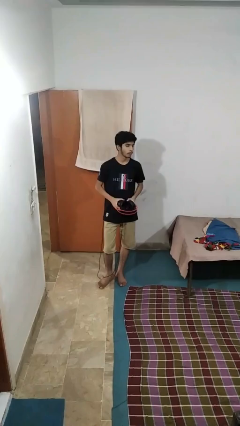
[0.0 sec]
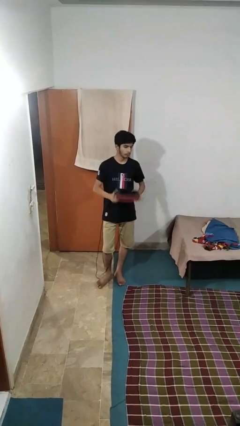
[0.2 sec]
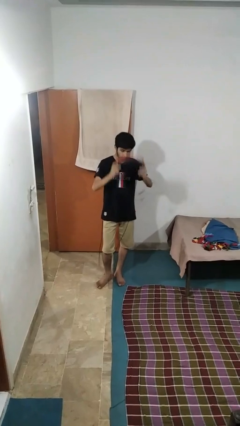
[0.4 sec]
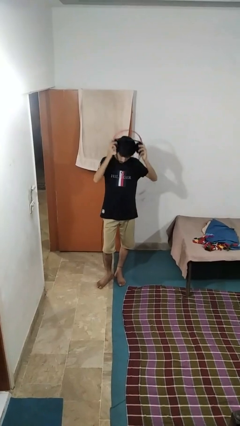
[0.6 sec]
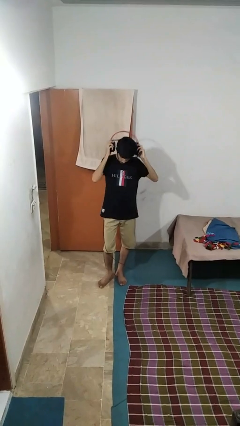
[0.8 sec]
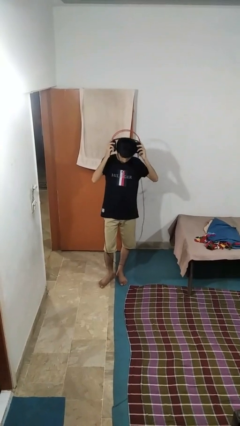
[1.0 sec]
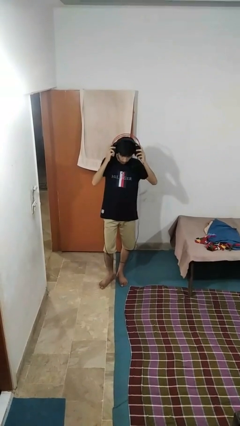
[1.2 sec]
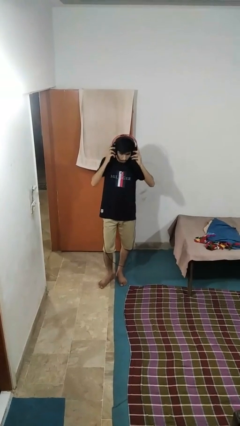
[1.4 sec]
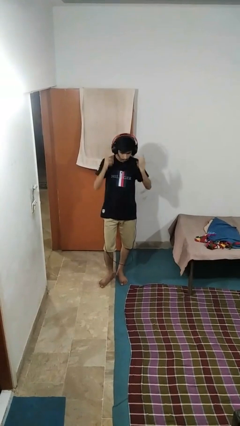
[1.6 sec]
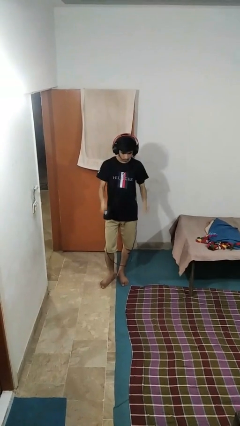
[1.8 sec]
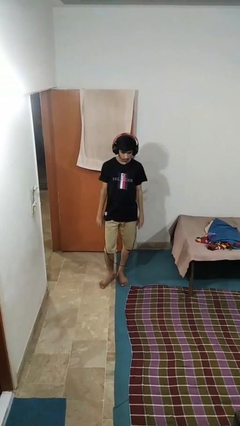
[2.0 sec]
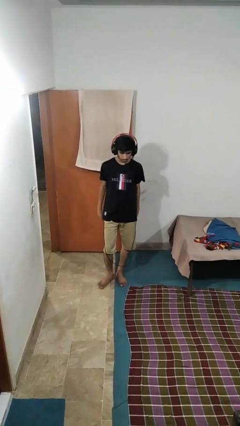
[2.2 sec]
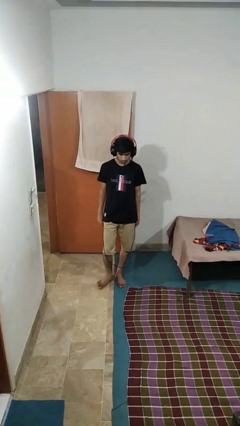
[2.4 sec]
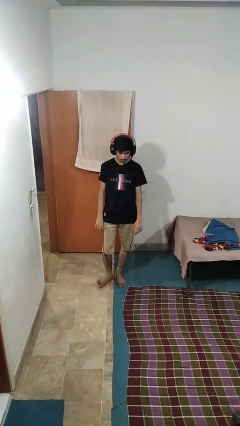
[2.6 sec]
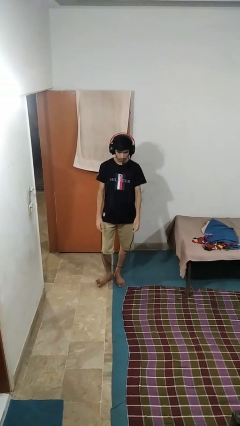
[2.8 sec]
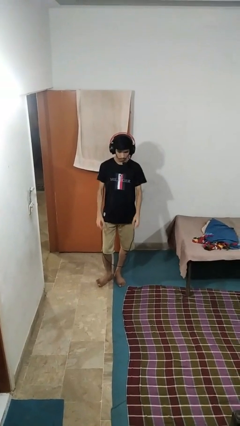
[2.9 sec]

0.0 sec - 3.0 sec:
person puts on headphones

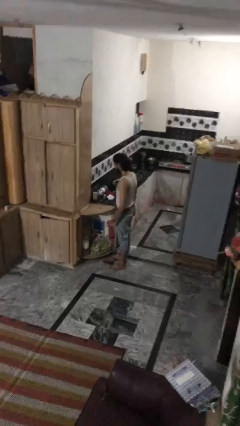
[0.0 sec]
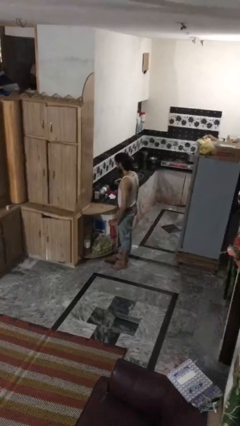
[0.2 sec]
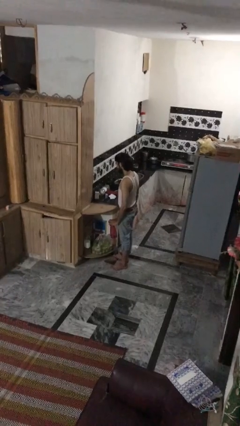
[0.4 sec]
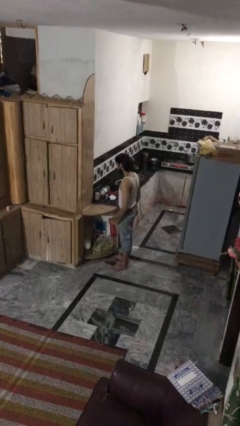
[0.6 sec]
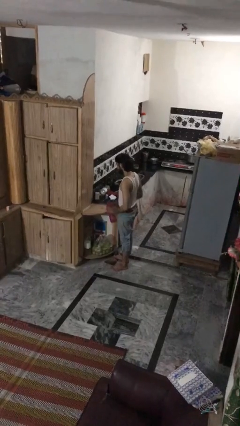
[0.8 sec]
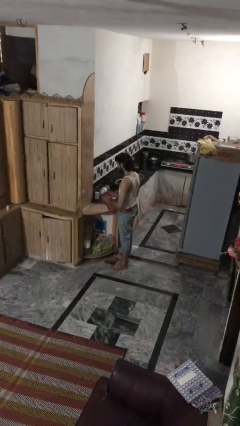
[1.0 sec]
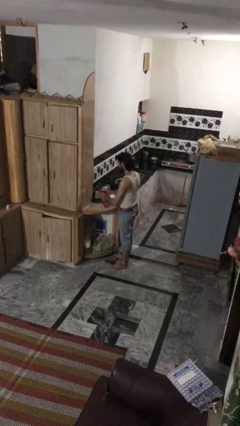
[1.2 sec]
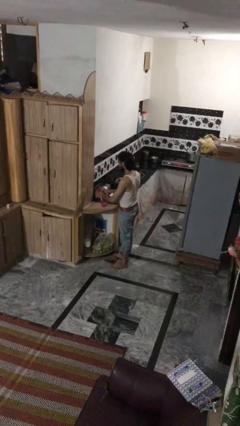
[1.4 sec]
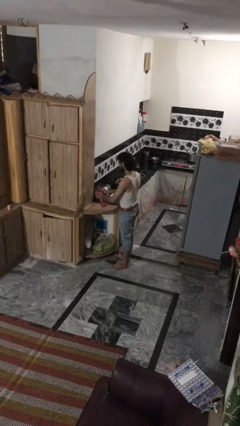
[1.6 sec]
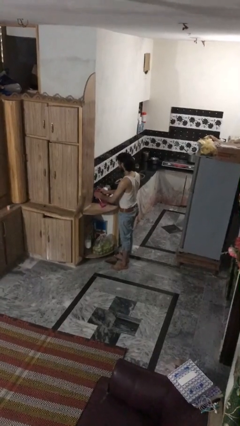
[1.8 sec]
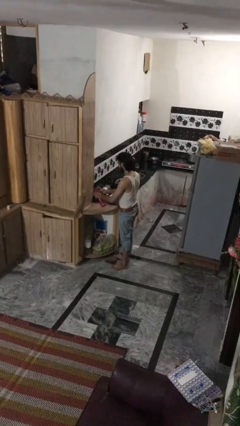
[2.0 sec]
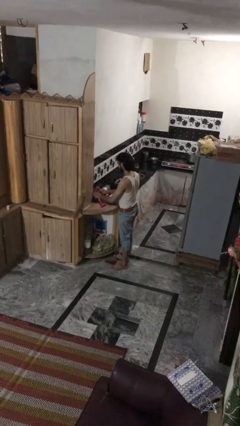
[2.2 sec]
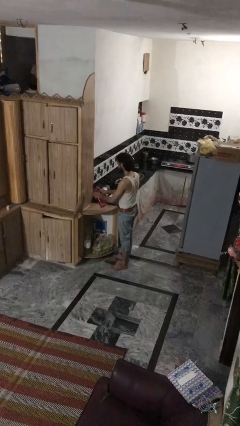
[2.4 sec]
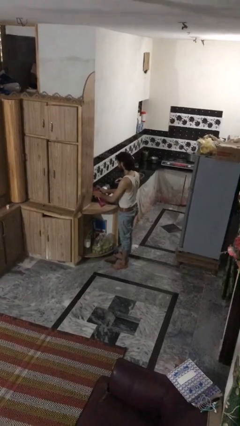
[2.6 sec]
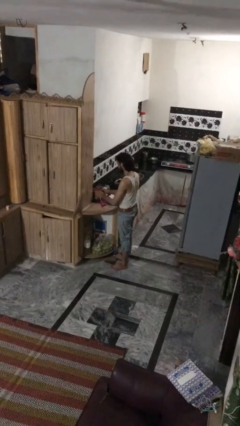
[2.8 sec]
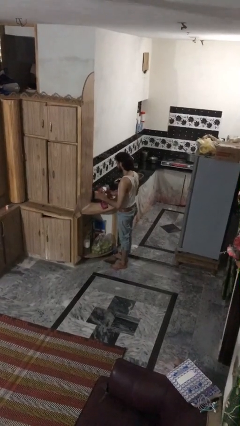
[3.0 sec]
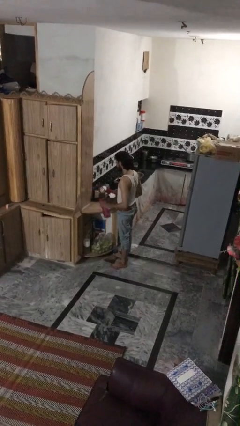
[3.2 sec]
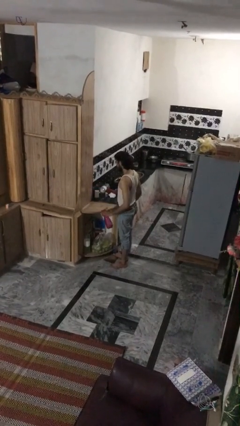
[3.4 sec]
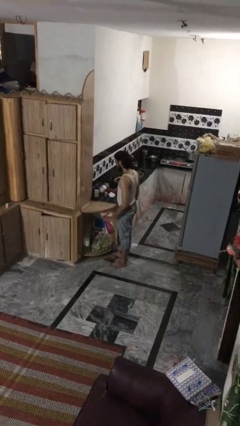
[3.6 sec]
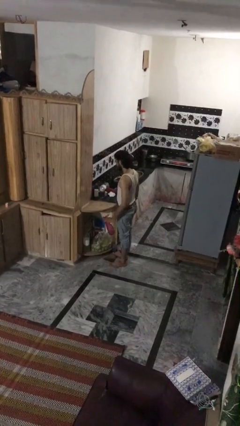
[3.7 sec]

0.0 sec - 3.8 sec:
person sprays from bottle

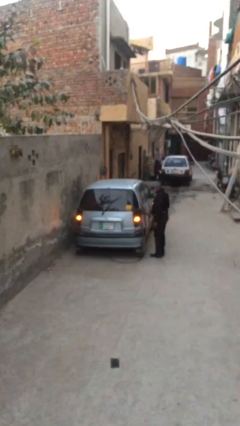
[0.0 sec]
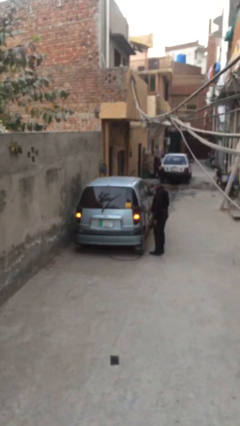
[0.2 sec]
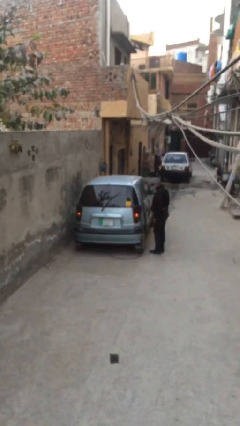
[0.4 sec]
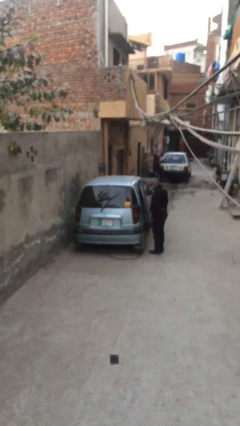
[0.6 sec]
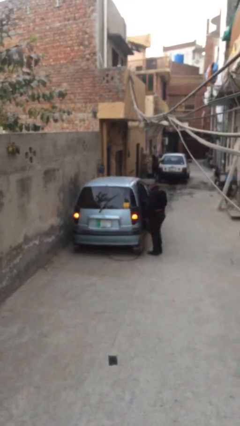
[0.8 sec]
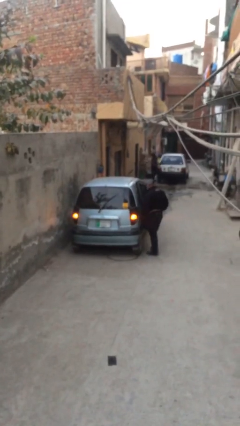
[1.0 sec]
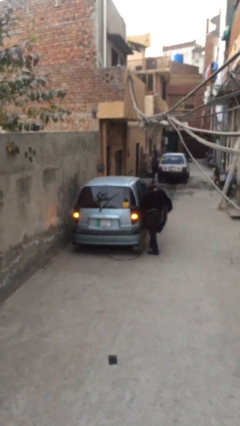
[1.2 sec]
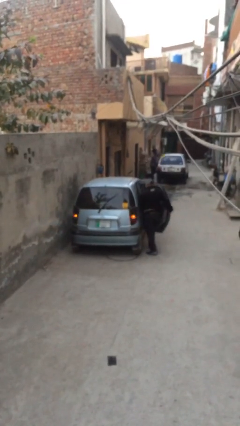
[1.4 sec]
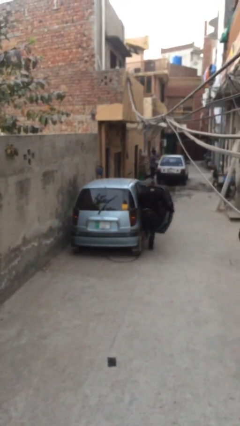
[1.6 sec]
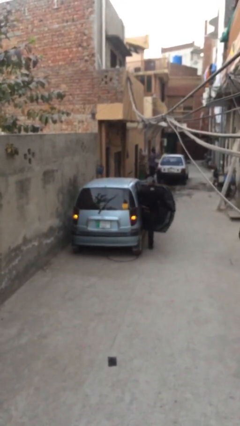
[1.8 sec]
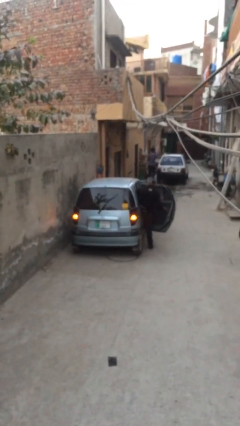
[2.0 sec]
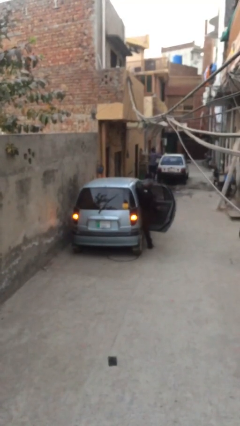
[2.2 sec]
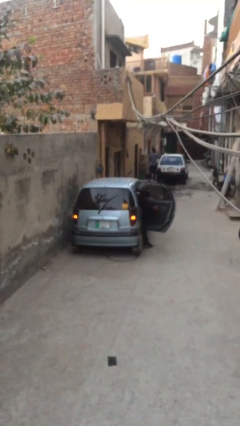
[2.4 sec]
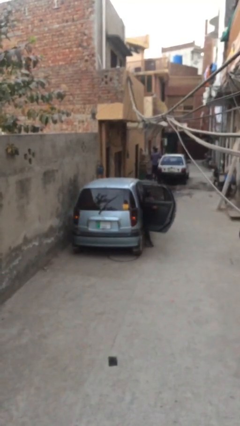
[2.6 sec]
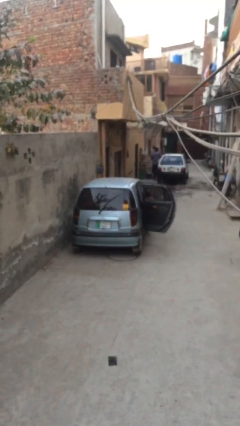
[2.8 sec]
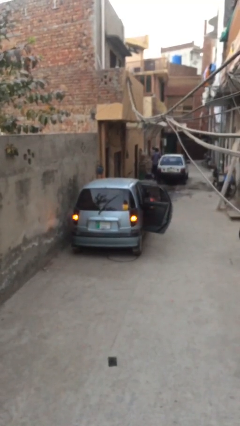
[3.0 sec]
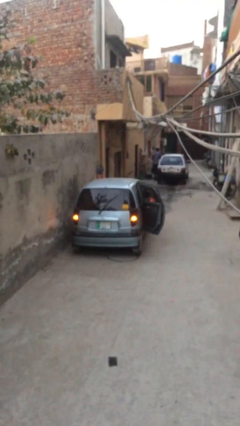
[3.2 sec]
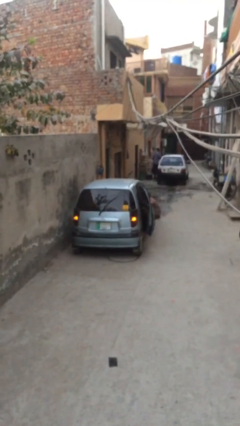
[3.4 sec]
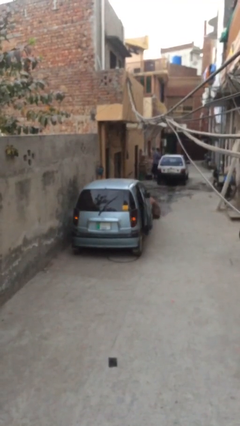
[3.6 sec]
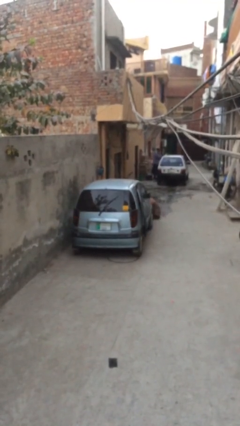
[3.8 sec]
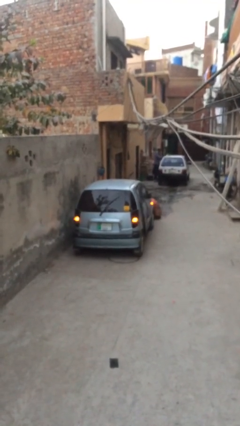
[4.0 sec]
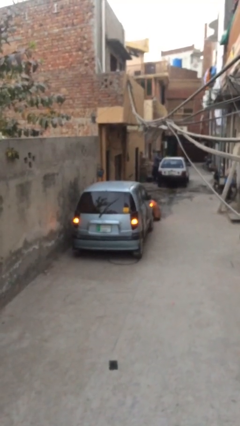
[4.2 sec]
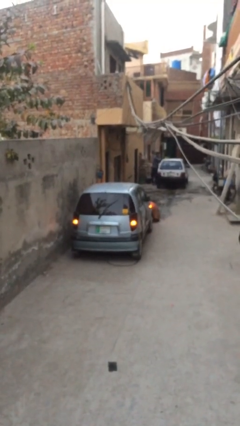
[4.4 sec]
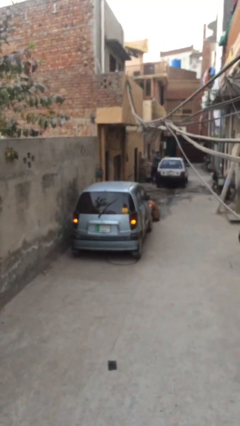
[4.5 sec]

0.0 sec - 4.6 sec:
car picks up person

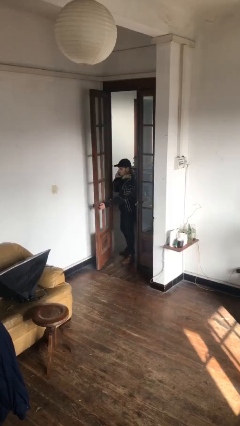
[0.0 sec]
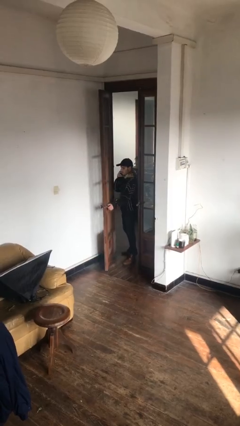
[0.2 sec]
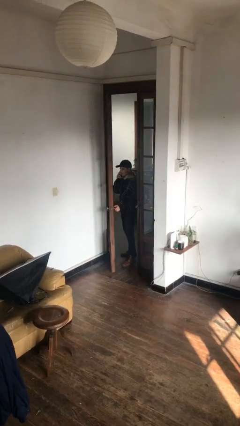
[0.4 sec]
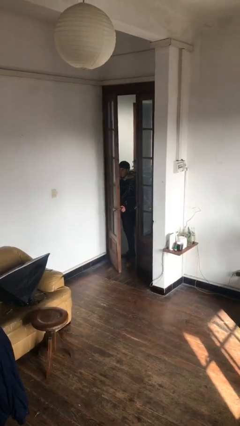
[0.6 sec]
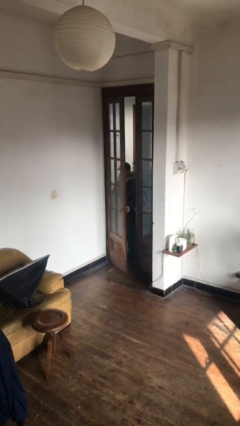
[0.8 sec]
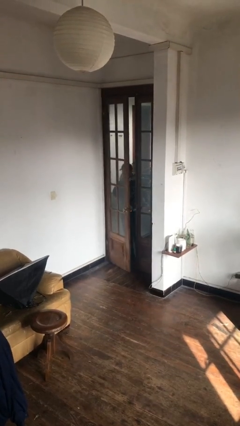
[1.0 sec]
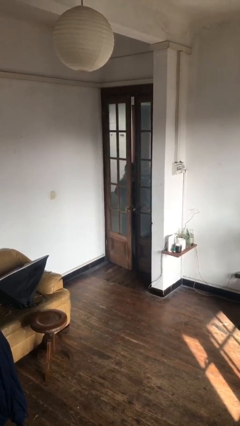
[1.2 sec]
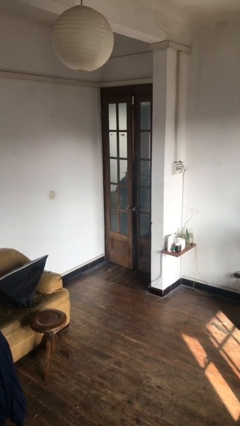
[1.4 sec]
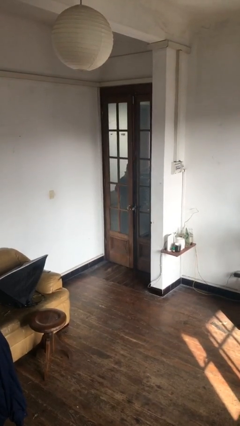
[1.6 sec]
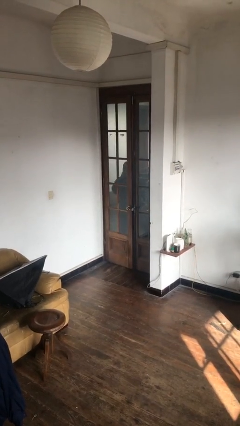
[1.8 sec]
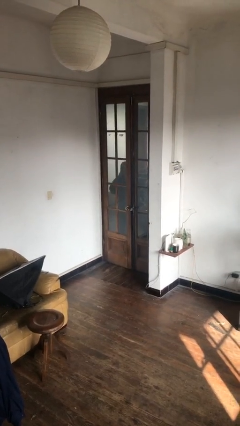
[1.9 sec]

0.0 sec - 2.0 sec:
person closes facility door

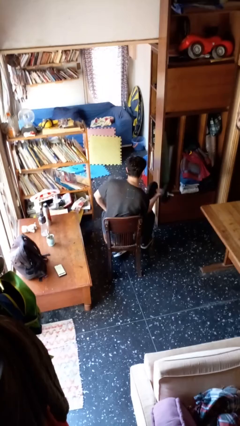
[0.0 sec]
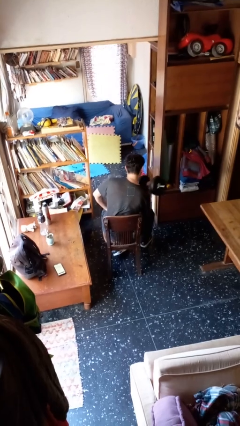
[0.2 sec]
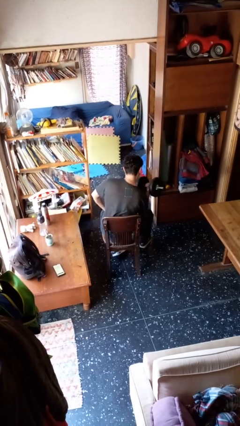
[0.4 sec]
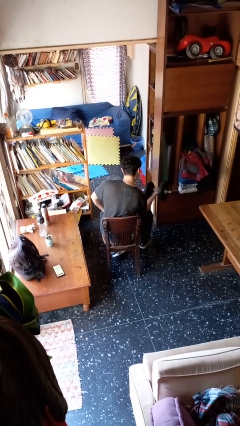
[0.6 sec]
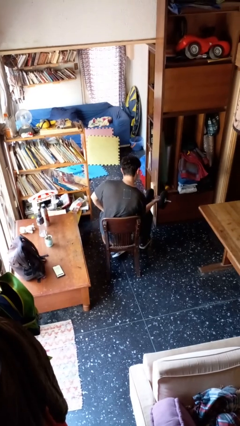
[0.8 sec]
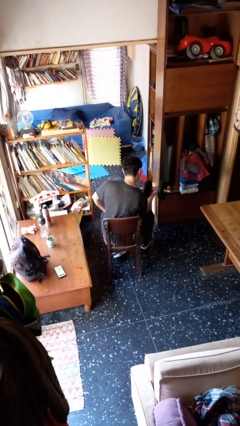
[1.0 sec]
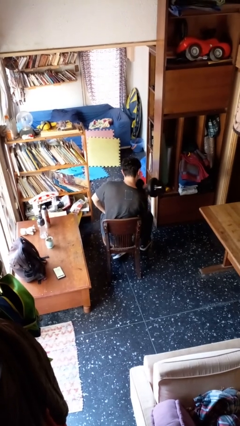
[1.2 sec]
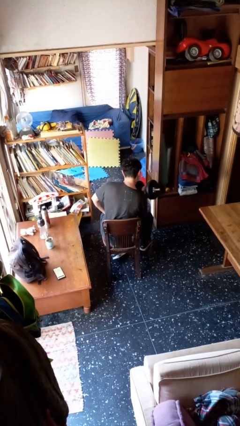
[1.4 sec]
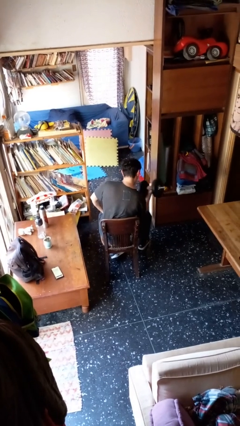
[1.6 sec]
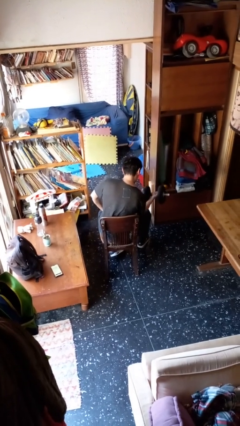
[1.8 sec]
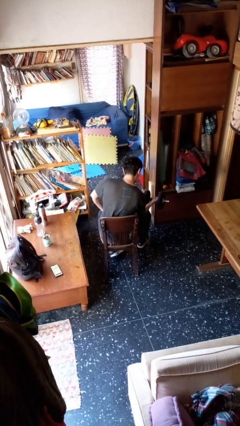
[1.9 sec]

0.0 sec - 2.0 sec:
person lifts dumbbells

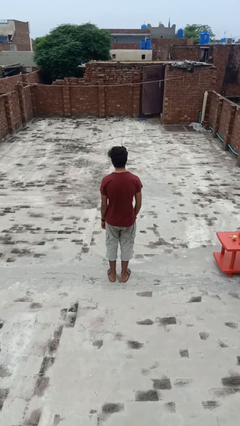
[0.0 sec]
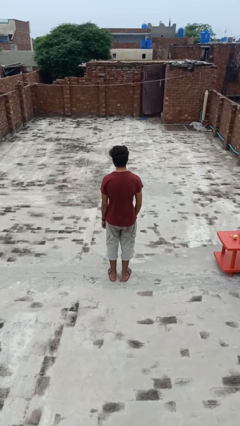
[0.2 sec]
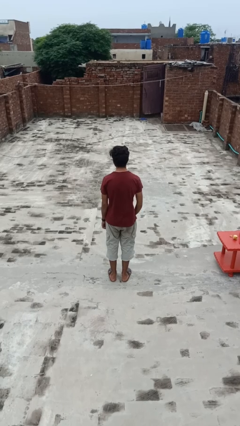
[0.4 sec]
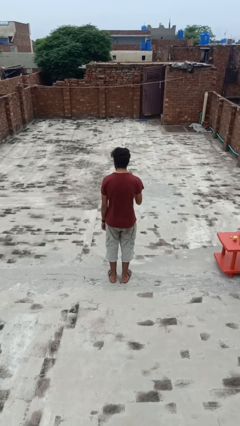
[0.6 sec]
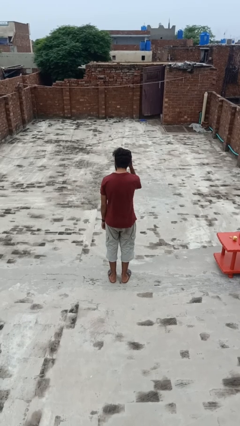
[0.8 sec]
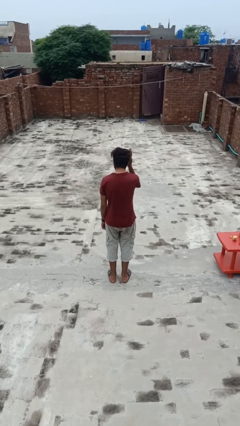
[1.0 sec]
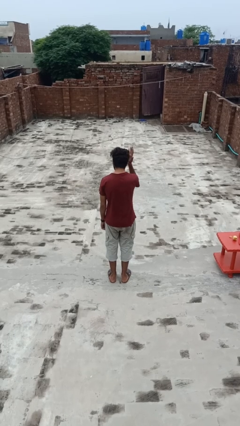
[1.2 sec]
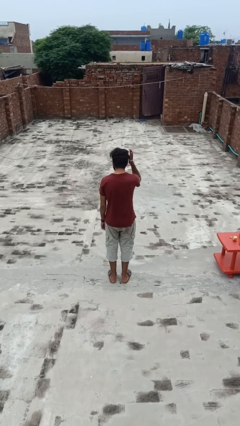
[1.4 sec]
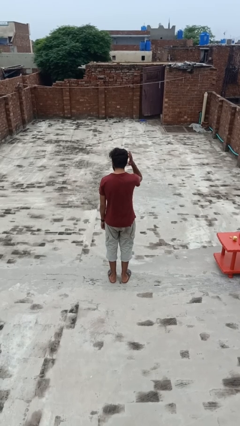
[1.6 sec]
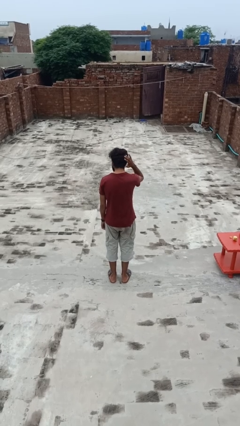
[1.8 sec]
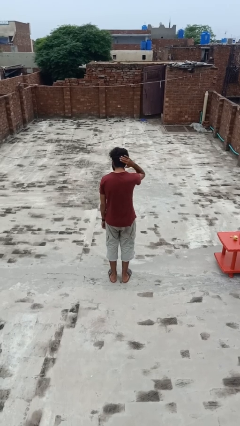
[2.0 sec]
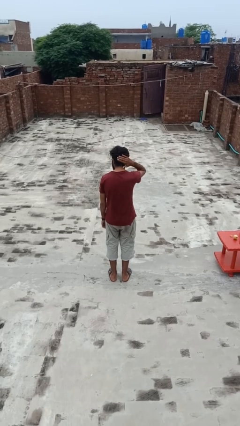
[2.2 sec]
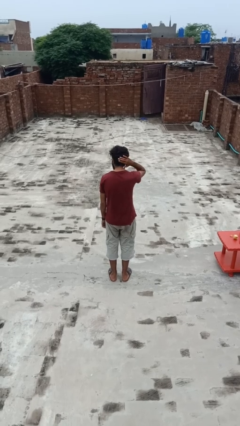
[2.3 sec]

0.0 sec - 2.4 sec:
person pats head
